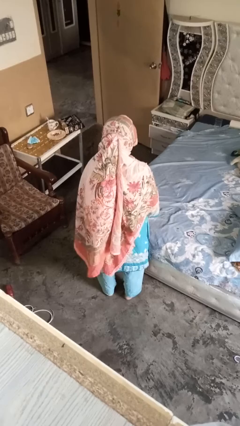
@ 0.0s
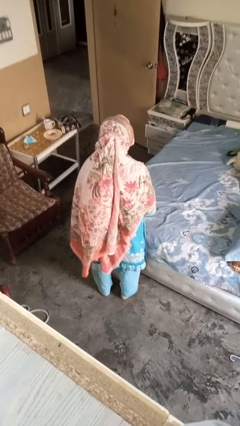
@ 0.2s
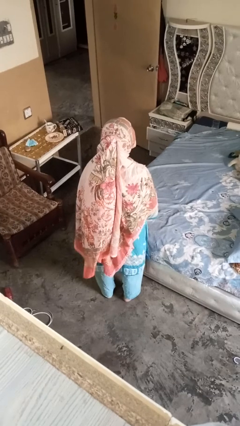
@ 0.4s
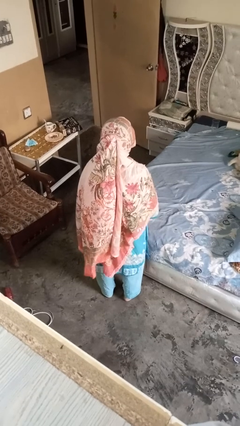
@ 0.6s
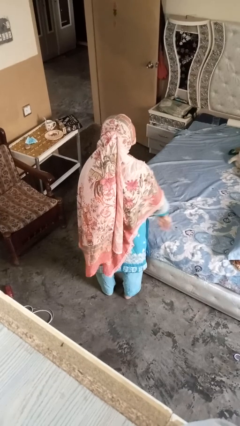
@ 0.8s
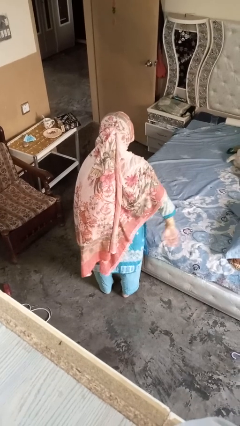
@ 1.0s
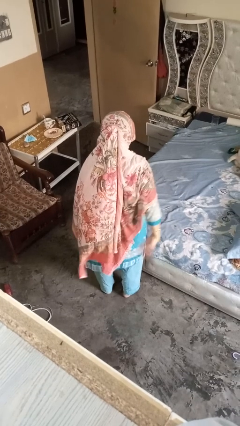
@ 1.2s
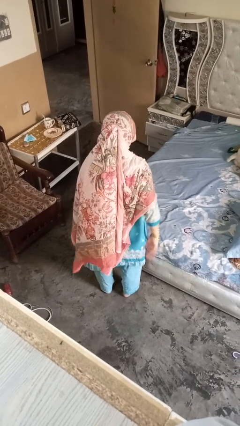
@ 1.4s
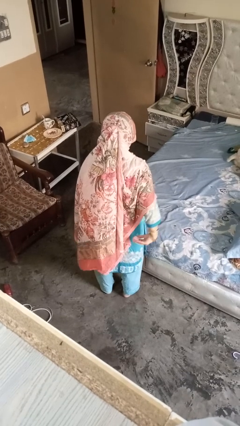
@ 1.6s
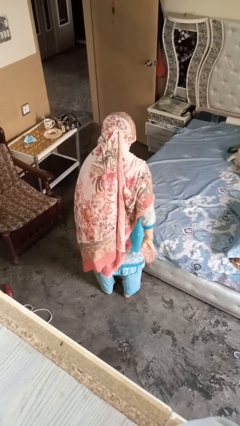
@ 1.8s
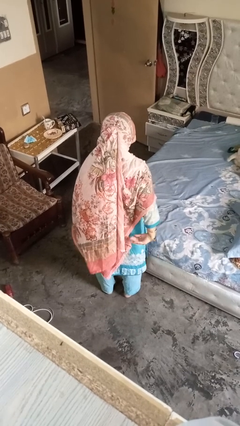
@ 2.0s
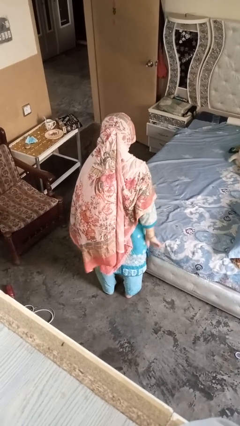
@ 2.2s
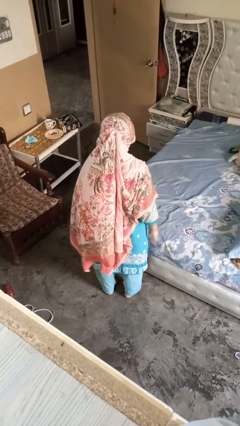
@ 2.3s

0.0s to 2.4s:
person gestures behind me

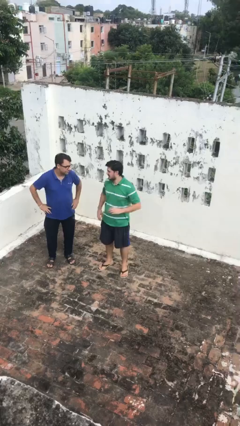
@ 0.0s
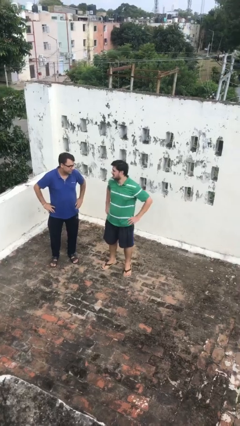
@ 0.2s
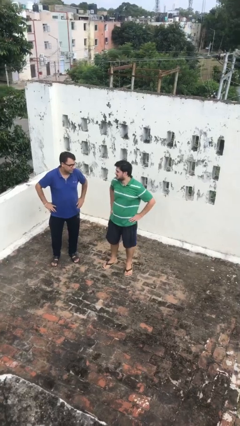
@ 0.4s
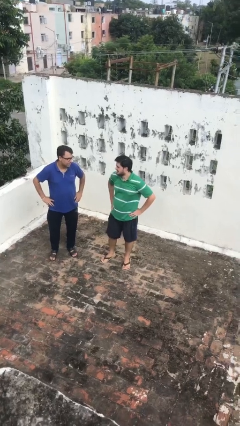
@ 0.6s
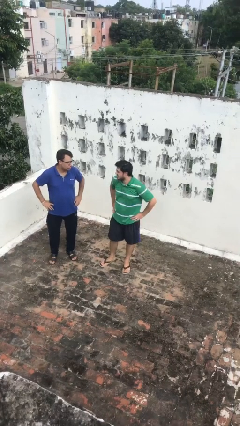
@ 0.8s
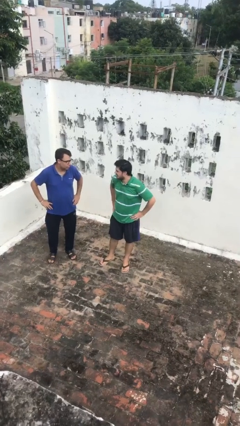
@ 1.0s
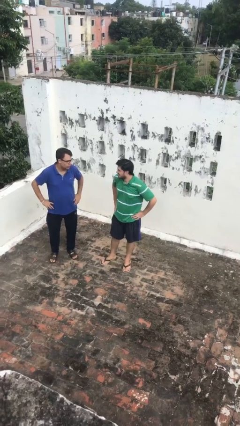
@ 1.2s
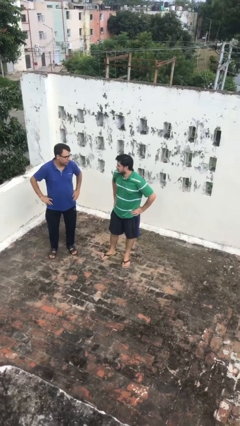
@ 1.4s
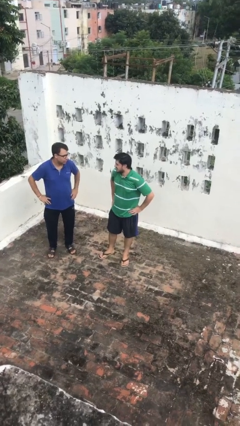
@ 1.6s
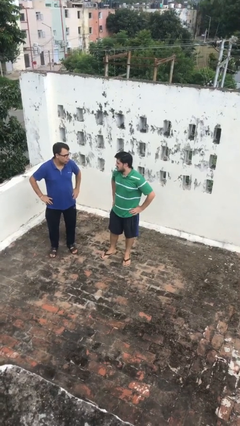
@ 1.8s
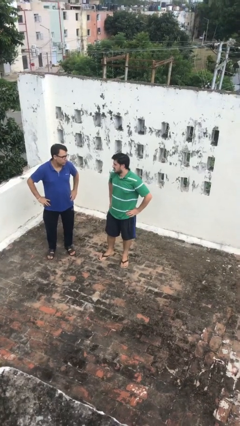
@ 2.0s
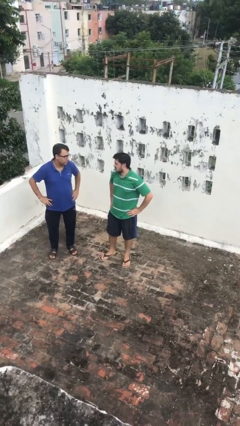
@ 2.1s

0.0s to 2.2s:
person talks to person

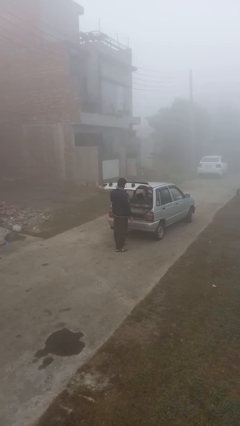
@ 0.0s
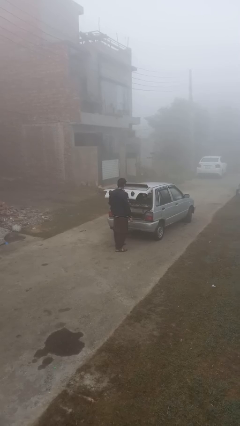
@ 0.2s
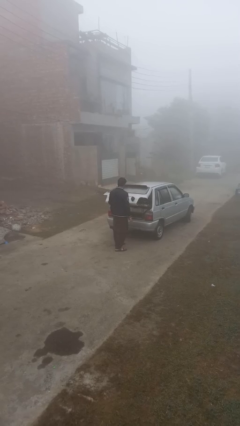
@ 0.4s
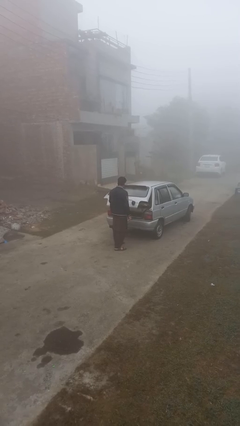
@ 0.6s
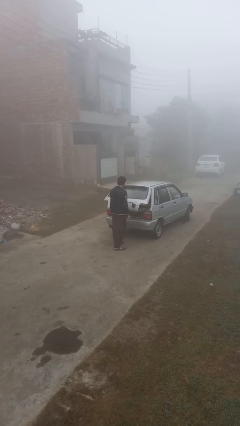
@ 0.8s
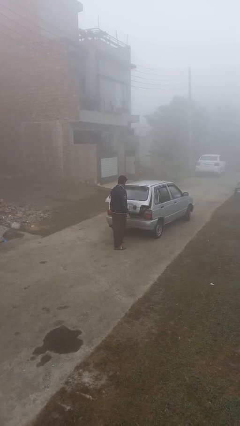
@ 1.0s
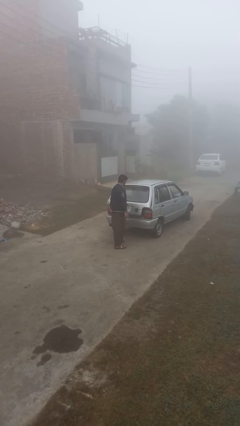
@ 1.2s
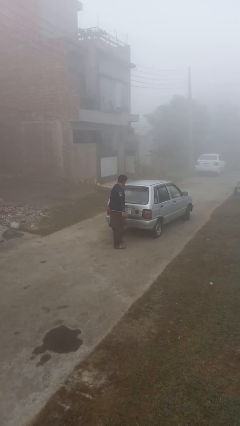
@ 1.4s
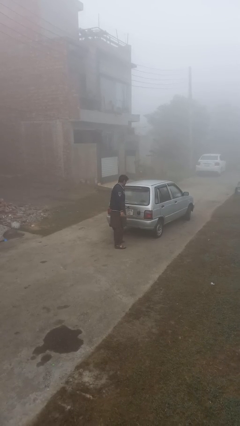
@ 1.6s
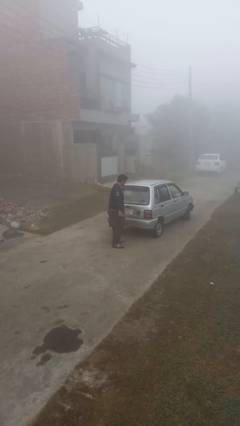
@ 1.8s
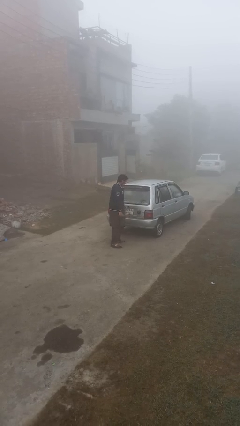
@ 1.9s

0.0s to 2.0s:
person closes car trunk

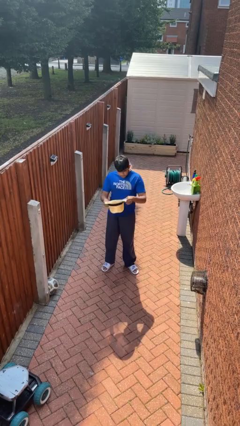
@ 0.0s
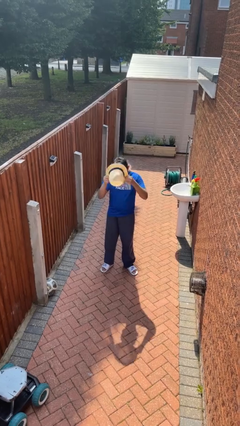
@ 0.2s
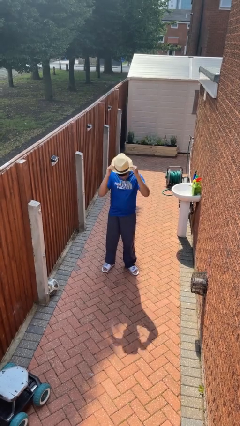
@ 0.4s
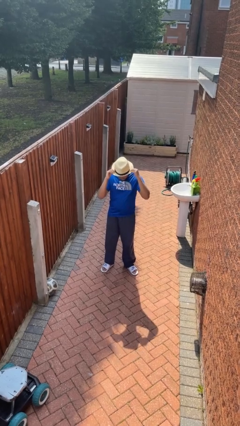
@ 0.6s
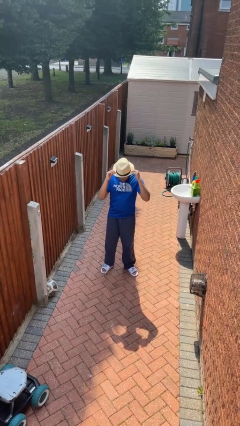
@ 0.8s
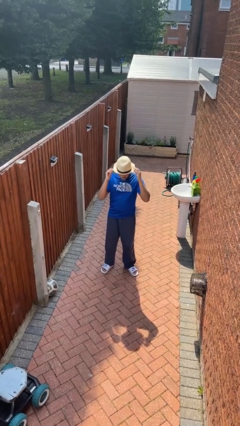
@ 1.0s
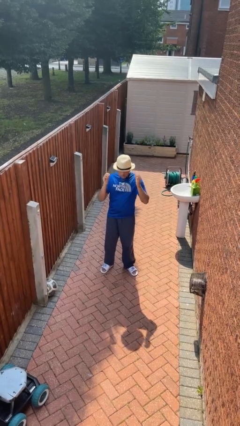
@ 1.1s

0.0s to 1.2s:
person puts on hat

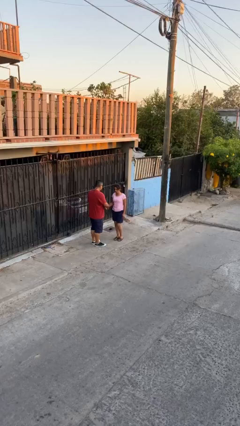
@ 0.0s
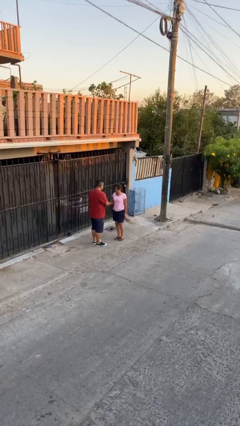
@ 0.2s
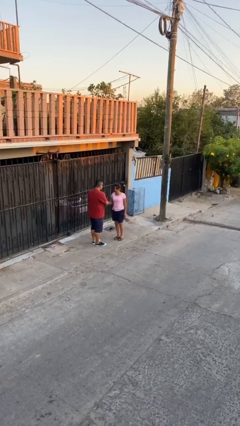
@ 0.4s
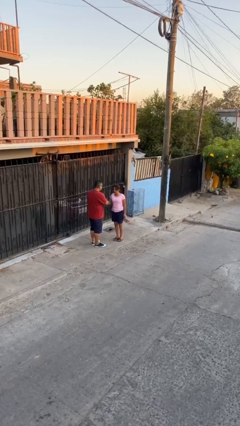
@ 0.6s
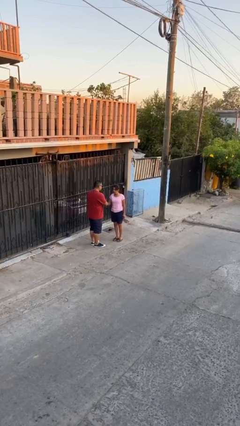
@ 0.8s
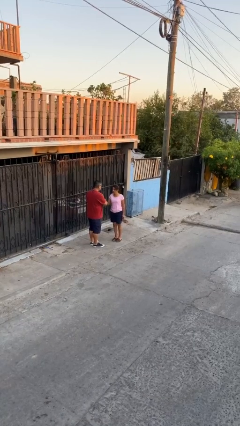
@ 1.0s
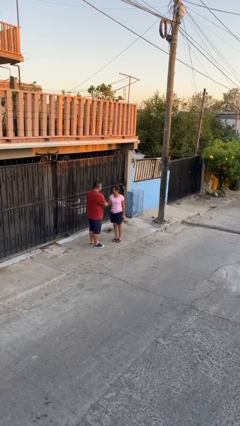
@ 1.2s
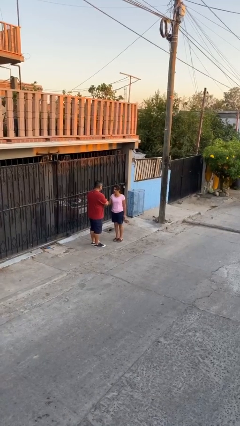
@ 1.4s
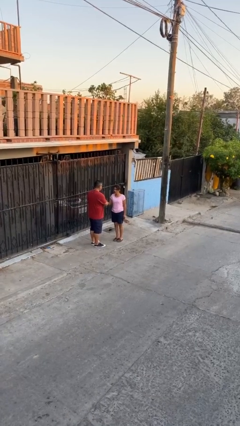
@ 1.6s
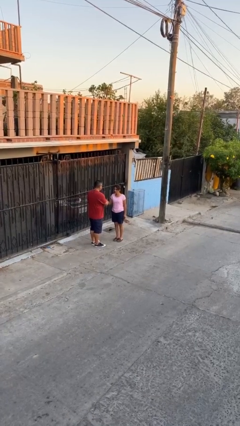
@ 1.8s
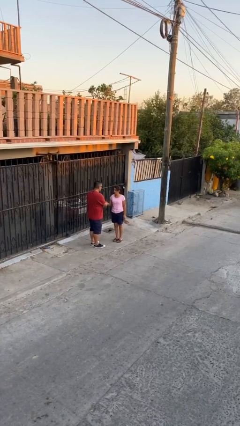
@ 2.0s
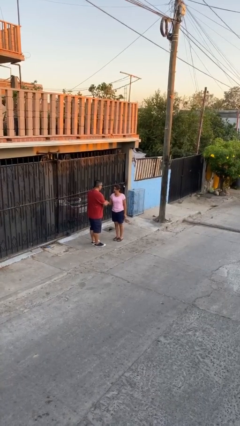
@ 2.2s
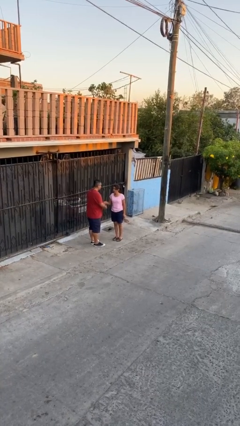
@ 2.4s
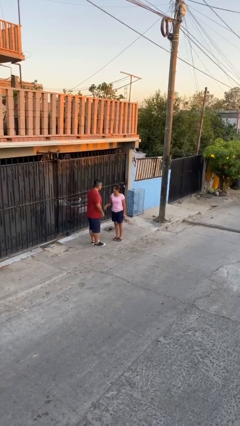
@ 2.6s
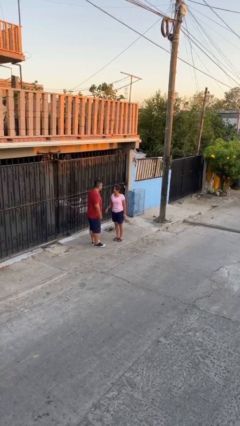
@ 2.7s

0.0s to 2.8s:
person shakes hand

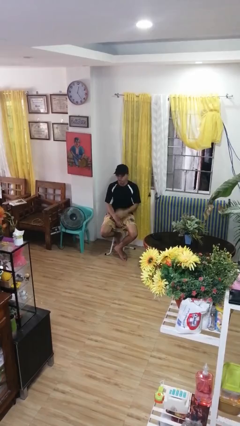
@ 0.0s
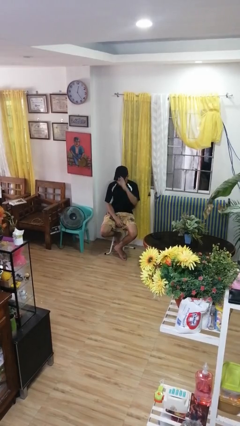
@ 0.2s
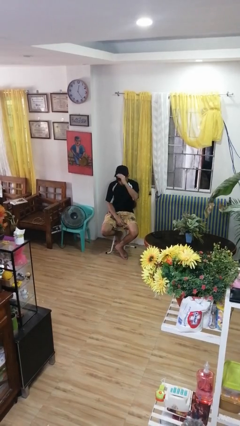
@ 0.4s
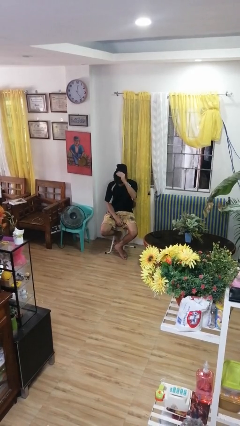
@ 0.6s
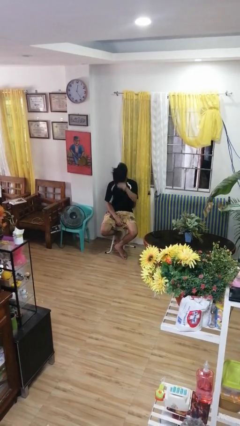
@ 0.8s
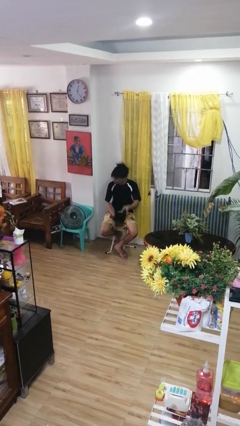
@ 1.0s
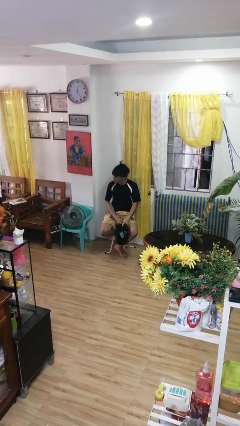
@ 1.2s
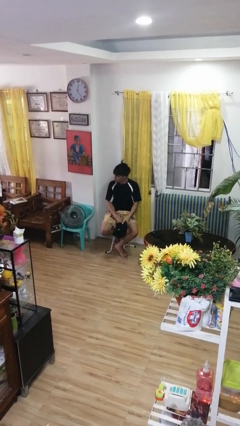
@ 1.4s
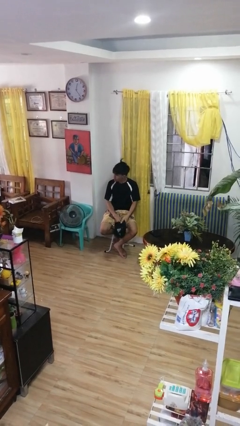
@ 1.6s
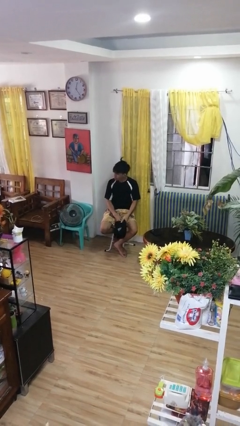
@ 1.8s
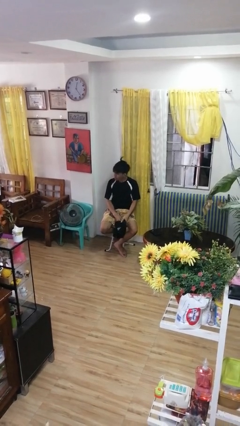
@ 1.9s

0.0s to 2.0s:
person takes off hat

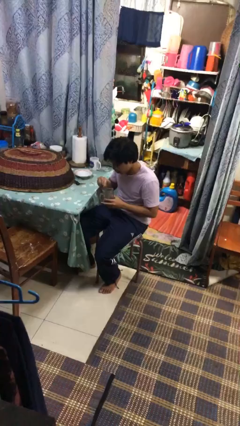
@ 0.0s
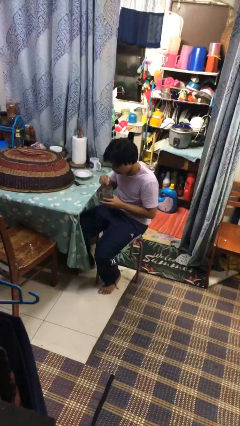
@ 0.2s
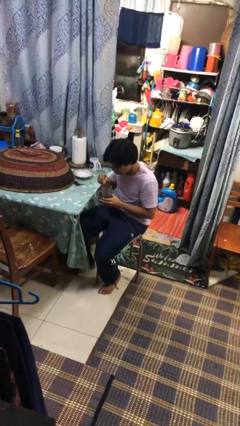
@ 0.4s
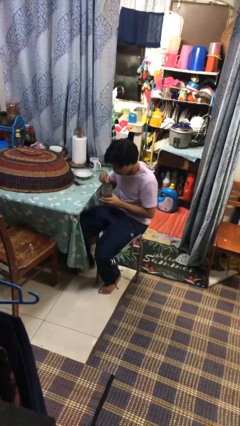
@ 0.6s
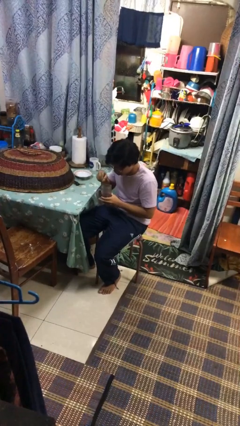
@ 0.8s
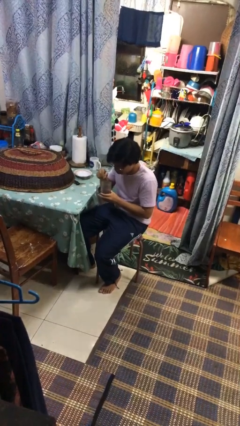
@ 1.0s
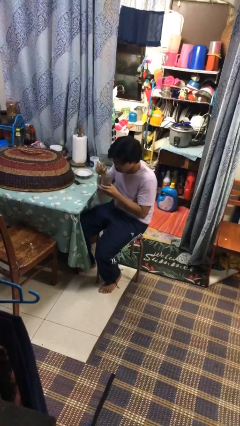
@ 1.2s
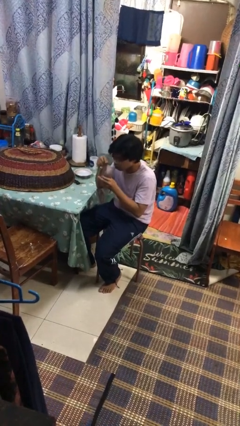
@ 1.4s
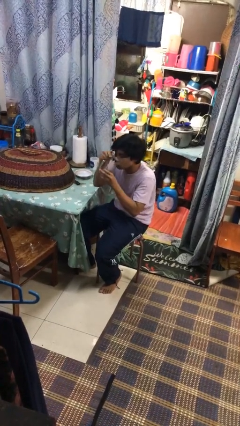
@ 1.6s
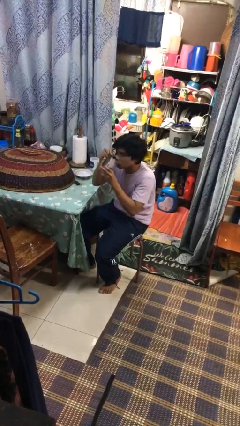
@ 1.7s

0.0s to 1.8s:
person stirs mug

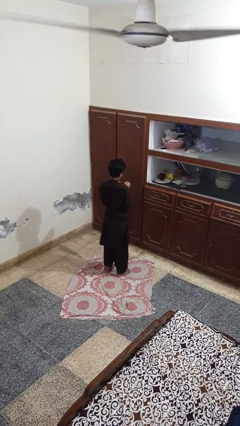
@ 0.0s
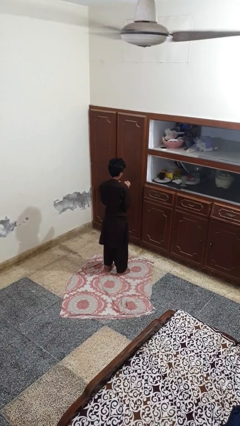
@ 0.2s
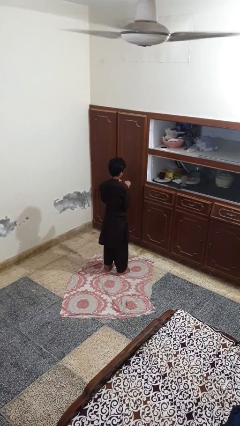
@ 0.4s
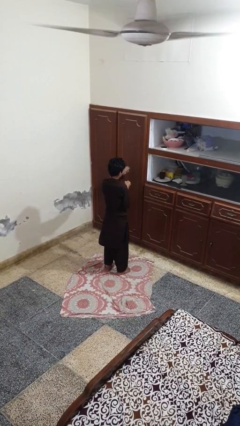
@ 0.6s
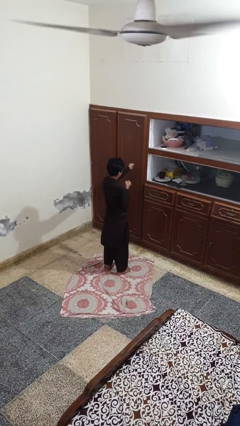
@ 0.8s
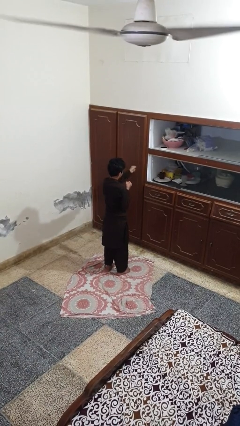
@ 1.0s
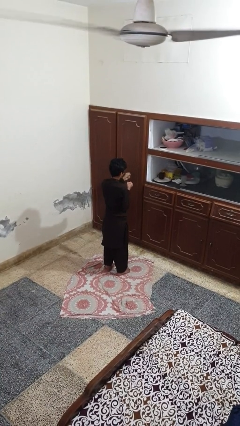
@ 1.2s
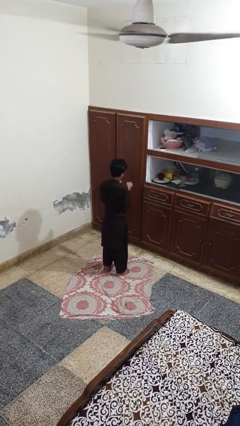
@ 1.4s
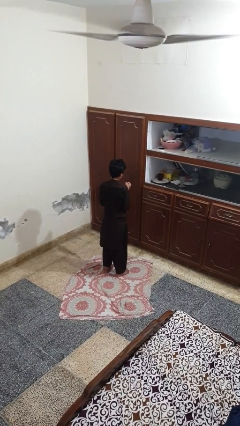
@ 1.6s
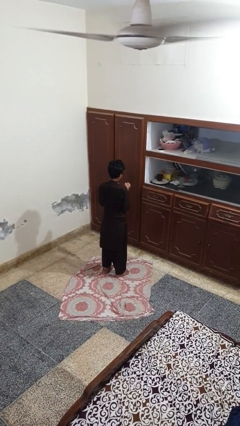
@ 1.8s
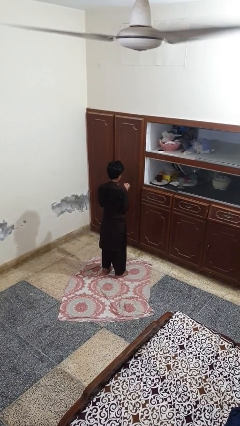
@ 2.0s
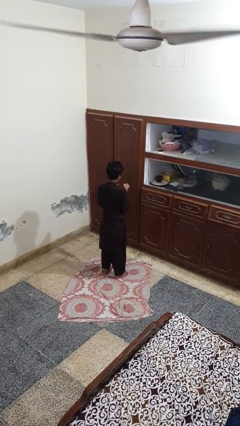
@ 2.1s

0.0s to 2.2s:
person punches
